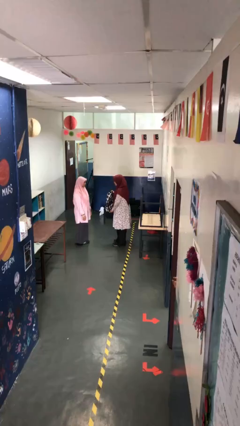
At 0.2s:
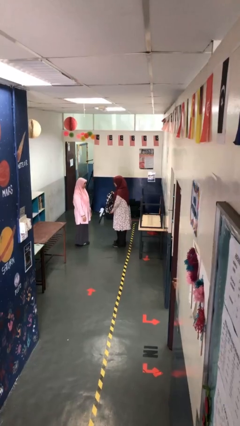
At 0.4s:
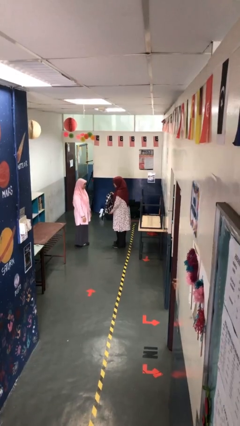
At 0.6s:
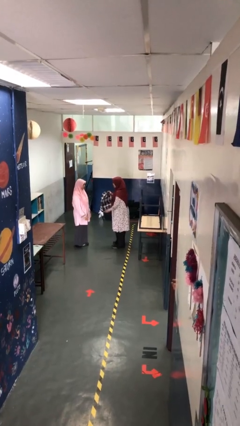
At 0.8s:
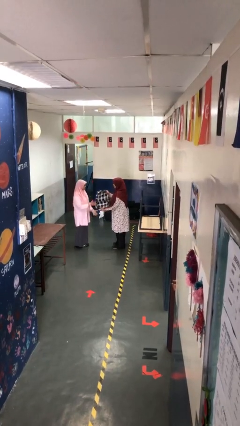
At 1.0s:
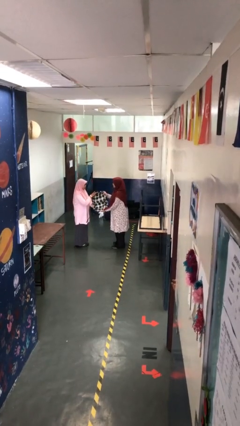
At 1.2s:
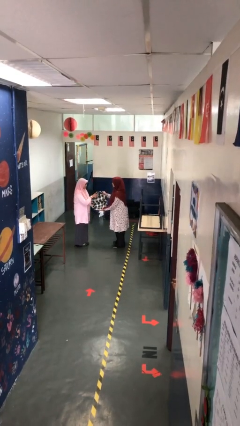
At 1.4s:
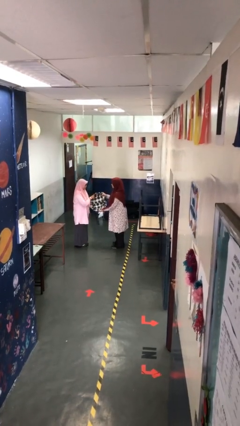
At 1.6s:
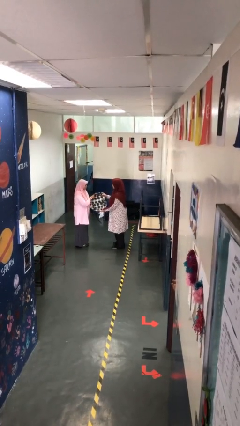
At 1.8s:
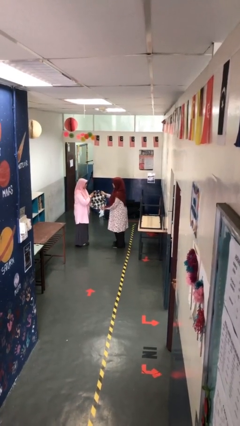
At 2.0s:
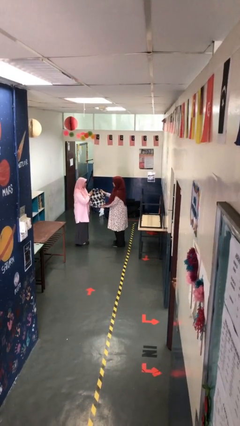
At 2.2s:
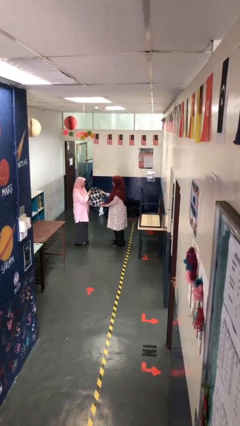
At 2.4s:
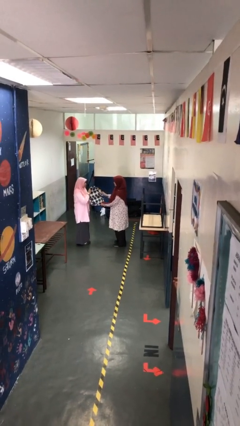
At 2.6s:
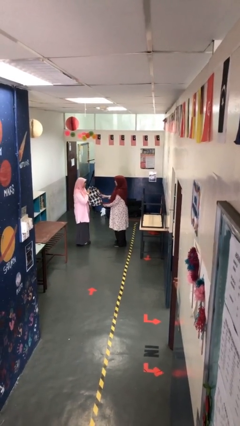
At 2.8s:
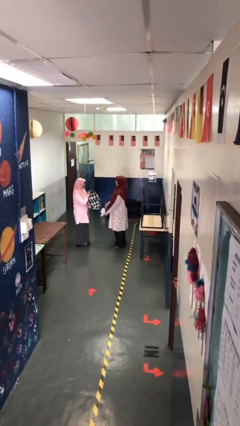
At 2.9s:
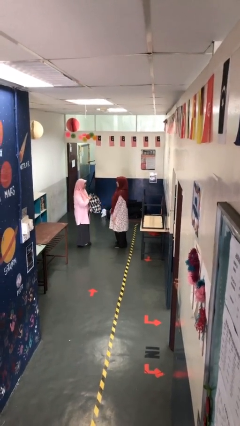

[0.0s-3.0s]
person transfers object to person

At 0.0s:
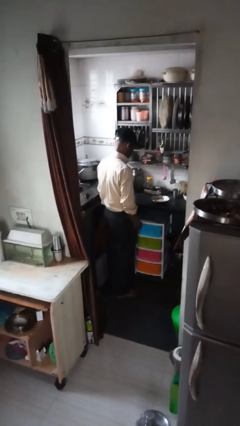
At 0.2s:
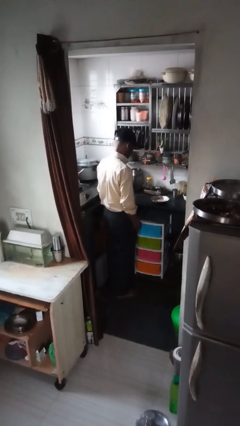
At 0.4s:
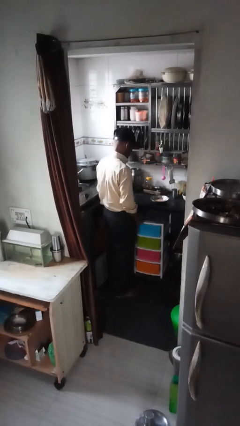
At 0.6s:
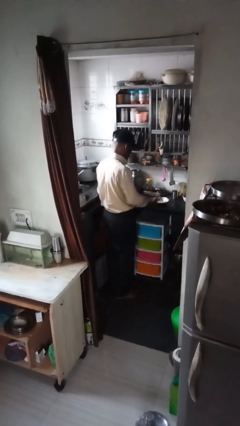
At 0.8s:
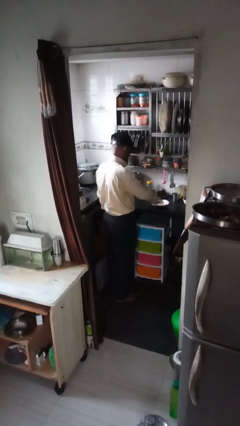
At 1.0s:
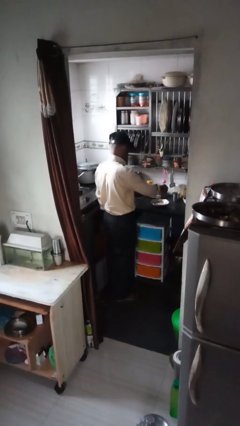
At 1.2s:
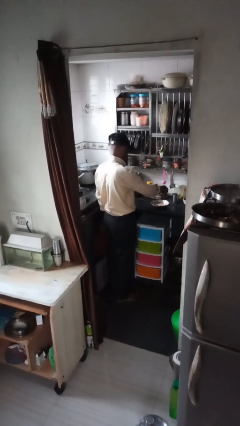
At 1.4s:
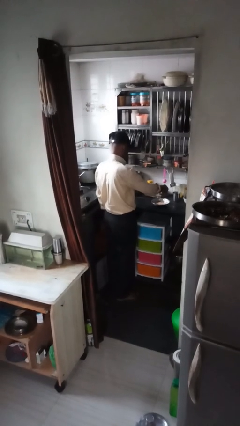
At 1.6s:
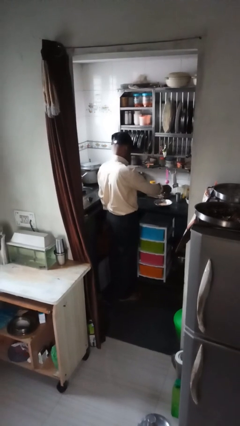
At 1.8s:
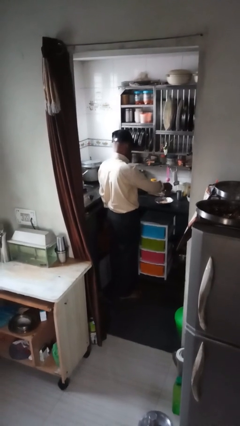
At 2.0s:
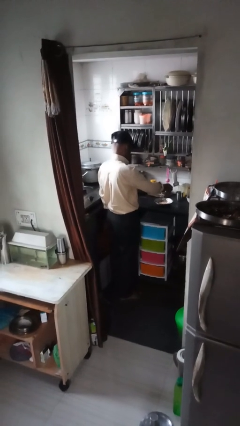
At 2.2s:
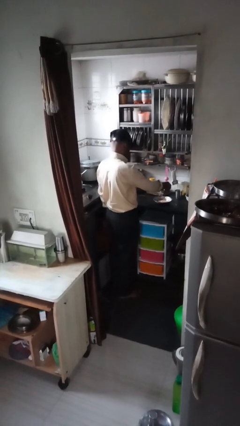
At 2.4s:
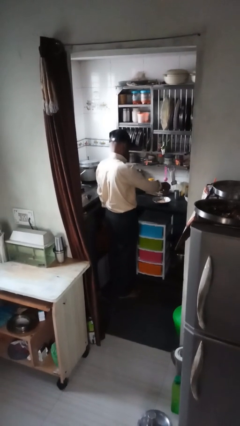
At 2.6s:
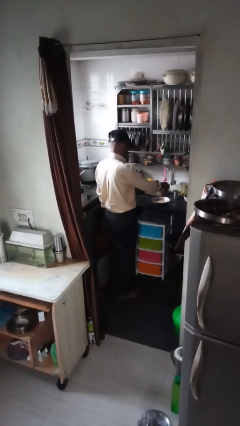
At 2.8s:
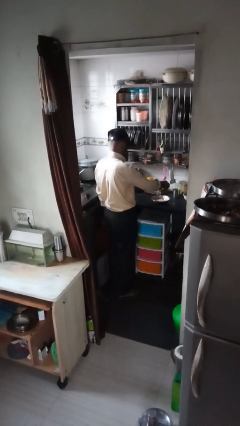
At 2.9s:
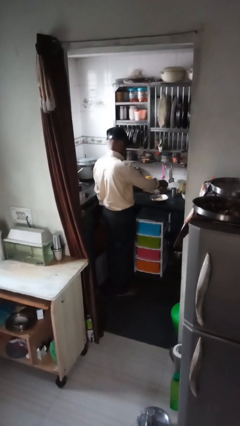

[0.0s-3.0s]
person pours into bowl

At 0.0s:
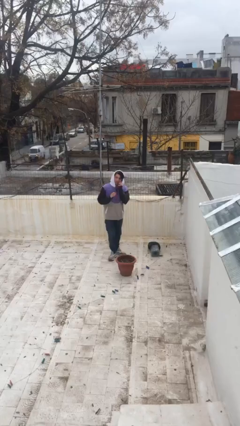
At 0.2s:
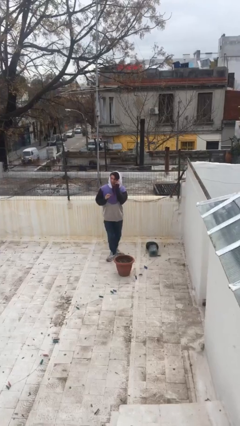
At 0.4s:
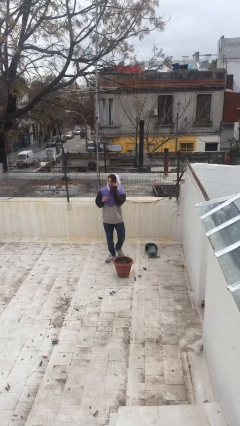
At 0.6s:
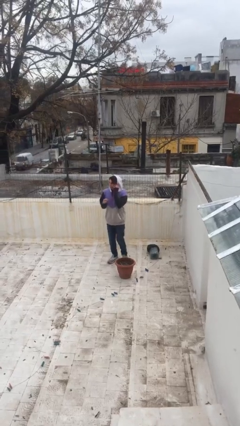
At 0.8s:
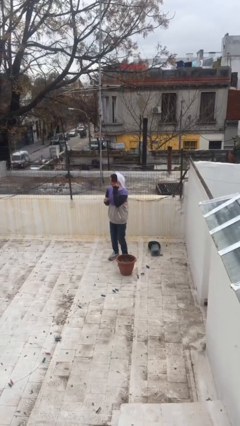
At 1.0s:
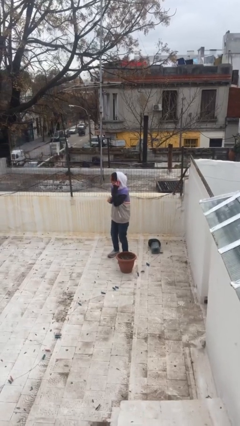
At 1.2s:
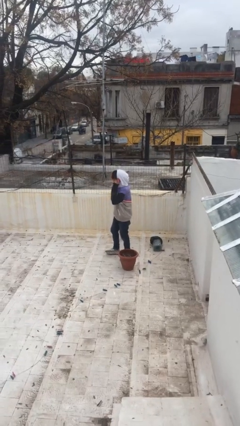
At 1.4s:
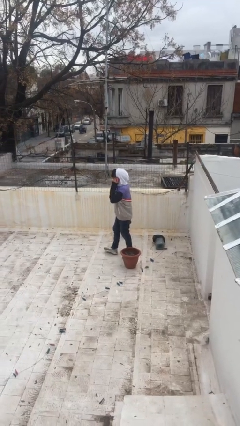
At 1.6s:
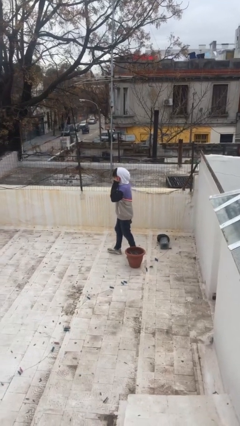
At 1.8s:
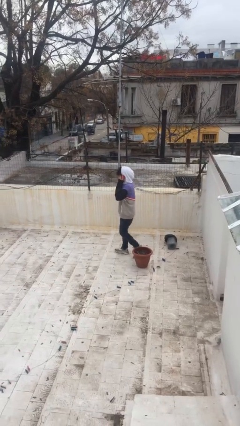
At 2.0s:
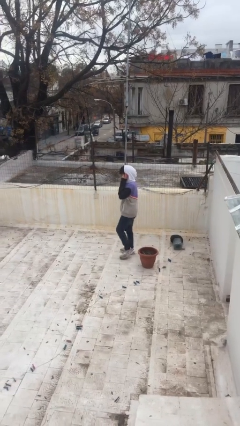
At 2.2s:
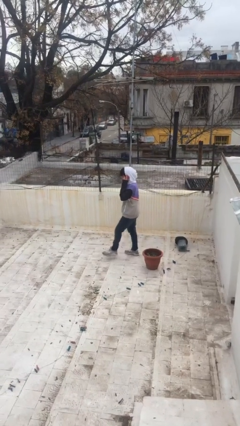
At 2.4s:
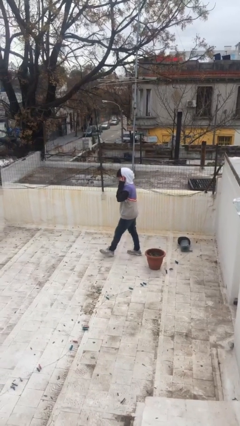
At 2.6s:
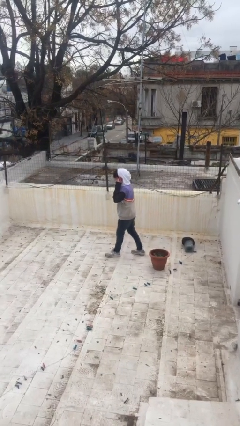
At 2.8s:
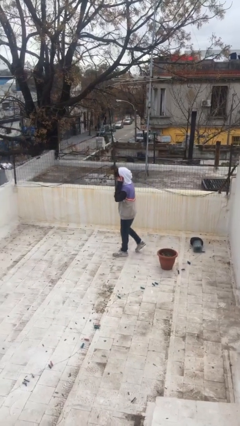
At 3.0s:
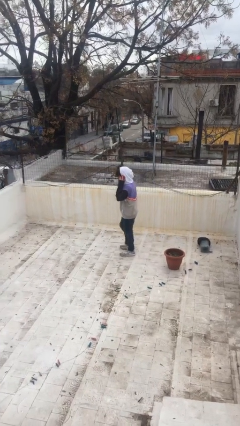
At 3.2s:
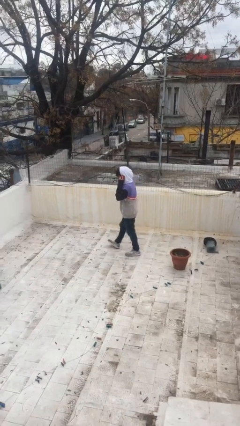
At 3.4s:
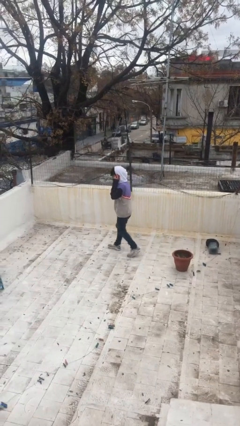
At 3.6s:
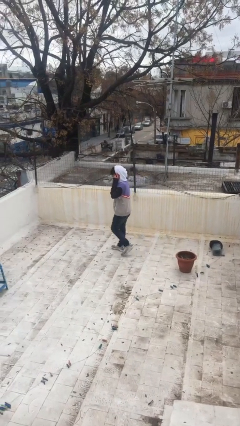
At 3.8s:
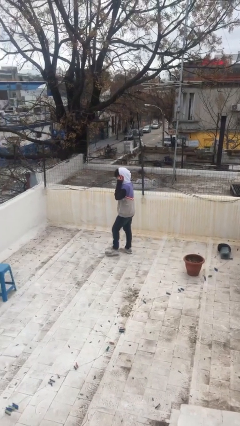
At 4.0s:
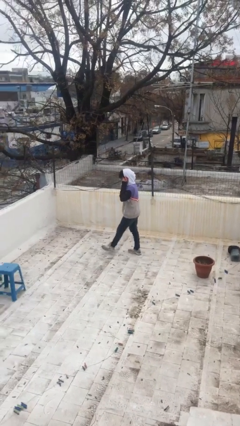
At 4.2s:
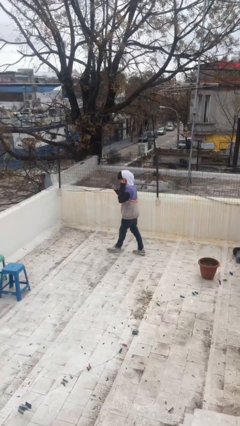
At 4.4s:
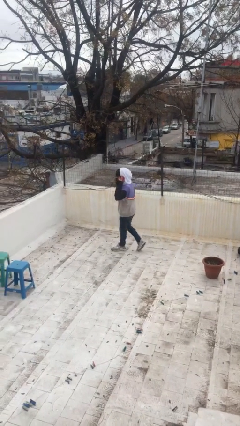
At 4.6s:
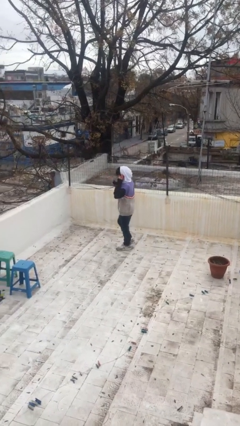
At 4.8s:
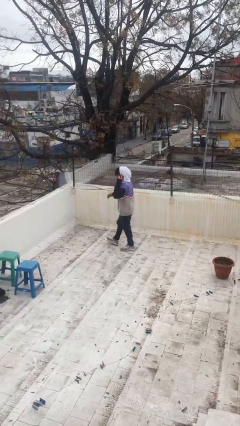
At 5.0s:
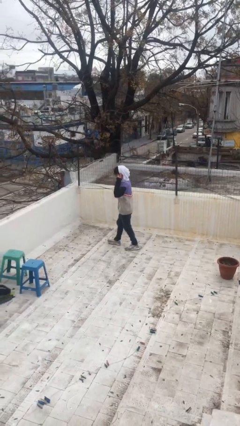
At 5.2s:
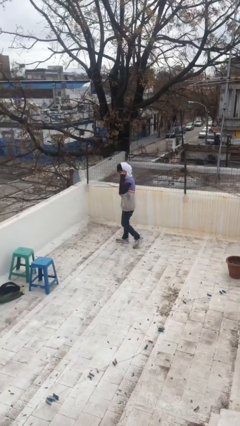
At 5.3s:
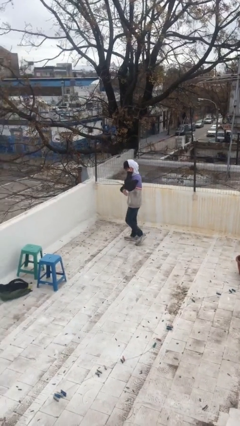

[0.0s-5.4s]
person talks on phone

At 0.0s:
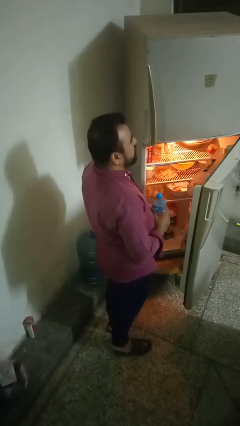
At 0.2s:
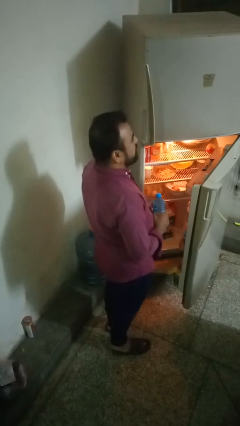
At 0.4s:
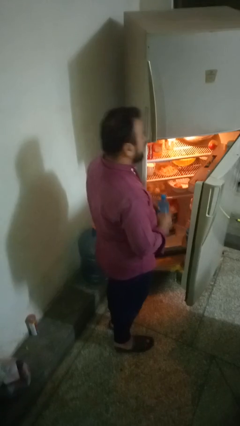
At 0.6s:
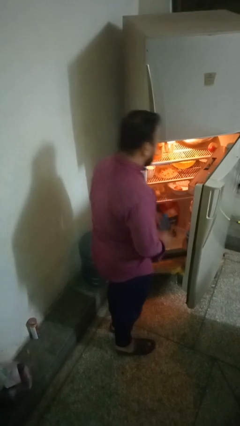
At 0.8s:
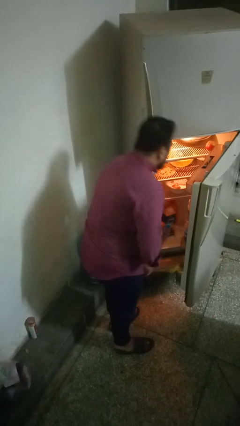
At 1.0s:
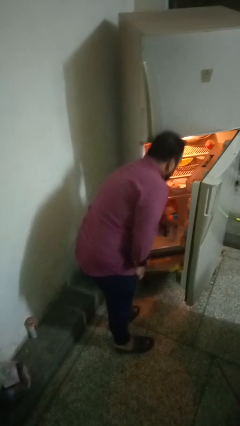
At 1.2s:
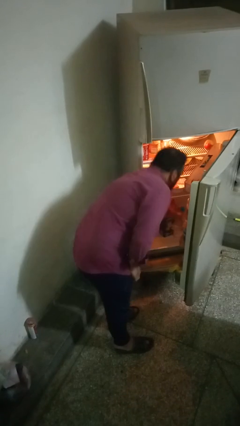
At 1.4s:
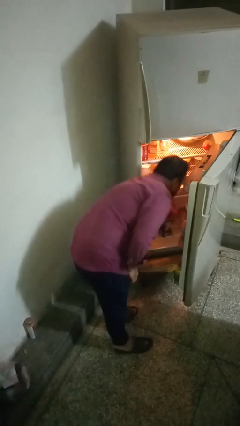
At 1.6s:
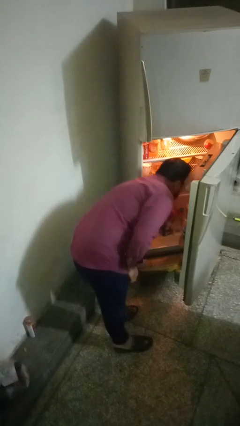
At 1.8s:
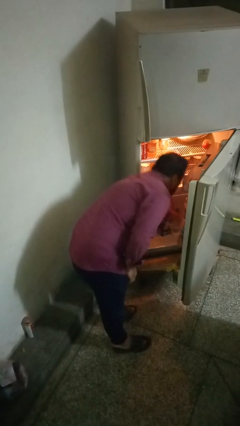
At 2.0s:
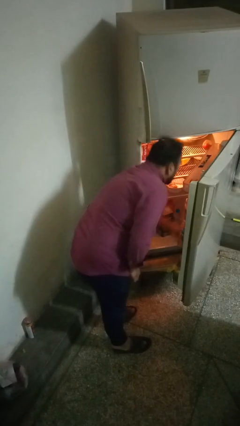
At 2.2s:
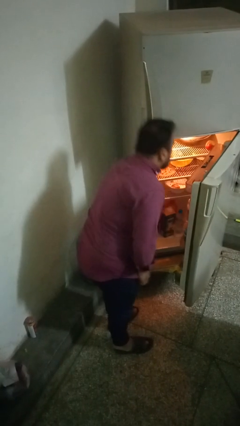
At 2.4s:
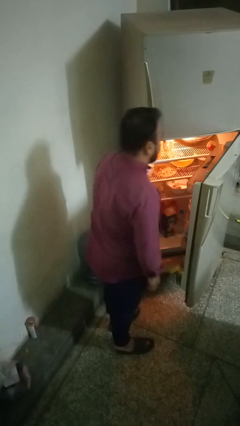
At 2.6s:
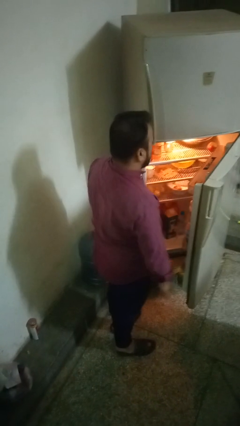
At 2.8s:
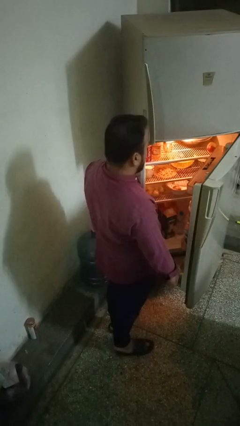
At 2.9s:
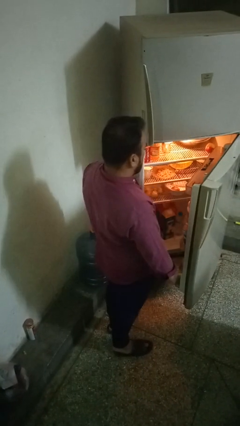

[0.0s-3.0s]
person puts object into refrigerator

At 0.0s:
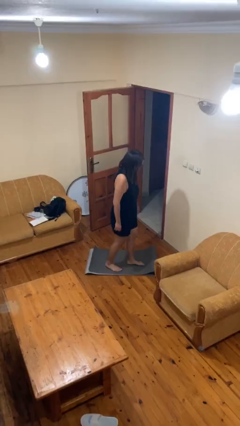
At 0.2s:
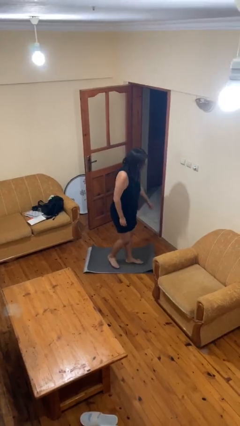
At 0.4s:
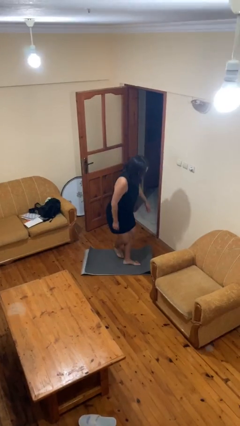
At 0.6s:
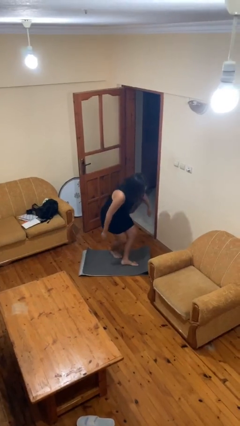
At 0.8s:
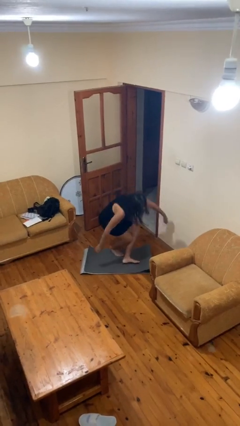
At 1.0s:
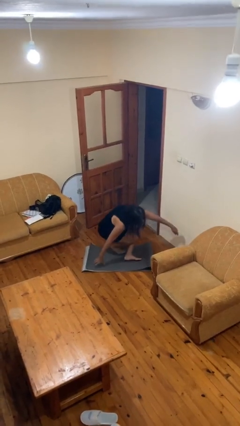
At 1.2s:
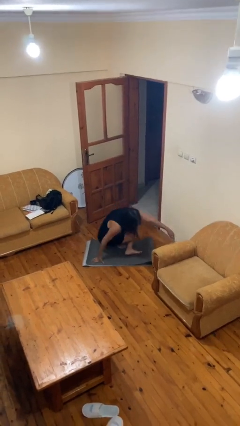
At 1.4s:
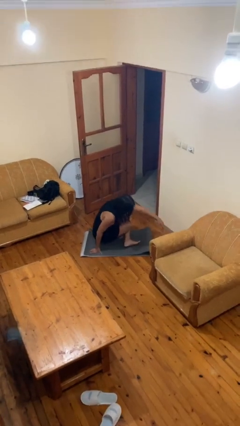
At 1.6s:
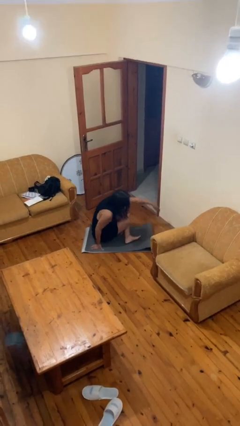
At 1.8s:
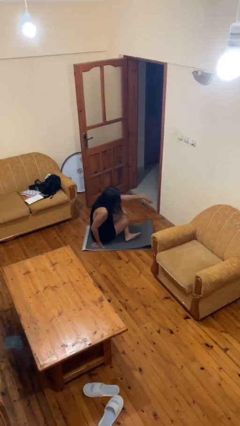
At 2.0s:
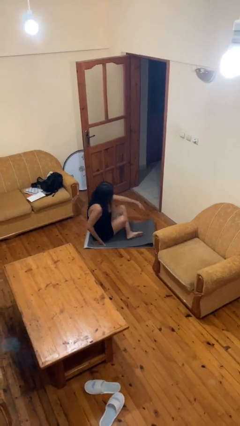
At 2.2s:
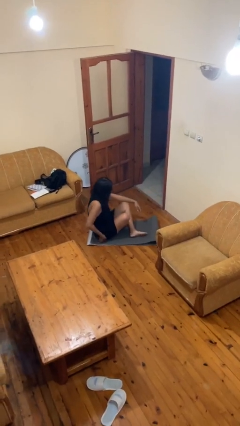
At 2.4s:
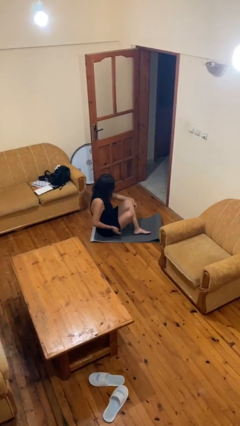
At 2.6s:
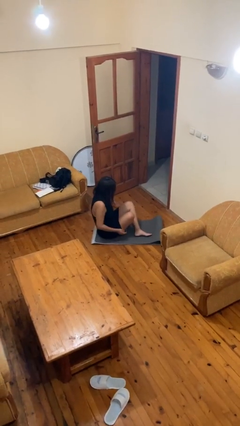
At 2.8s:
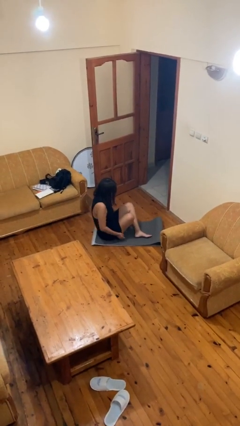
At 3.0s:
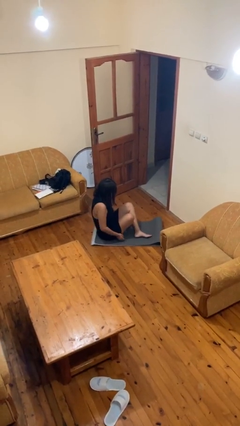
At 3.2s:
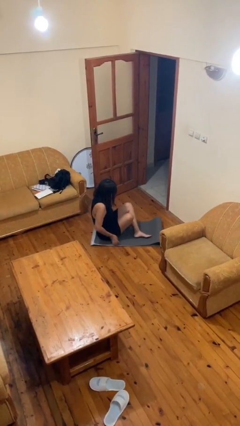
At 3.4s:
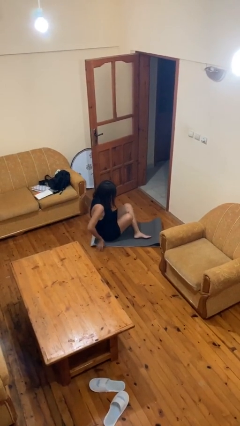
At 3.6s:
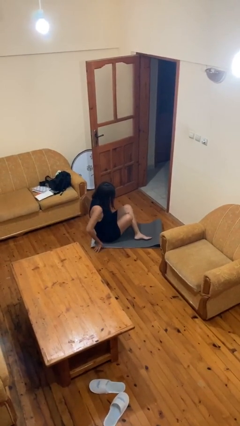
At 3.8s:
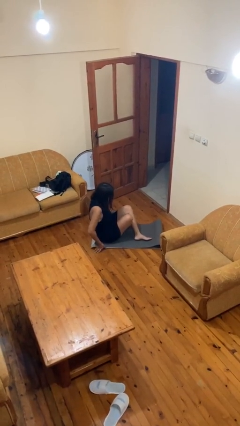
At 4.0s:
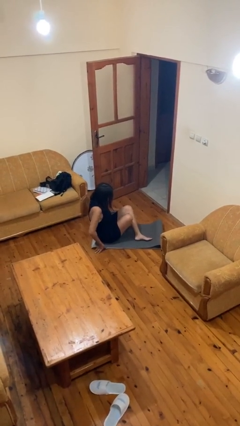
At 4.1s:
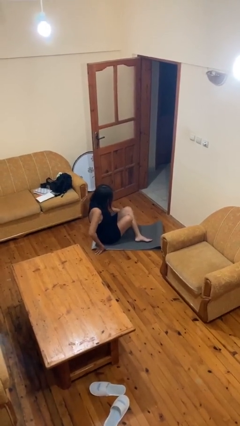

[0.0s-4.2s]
person sits crisscross
